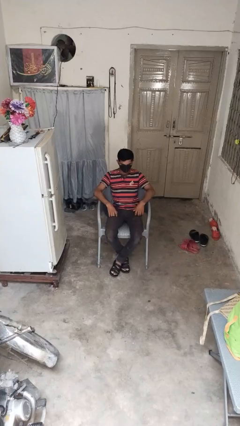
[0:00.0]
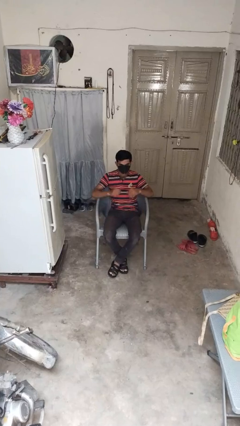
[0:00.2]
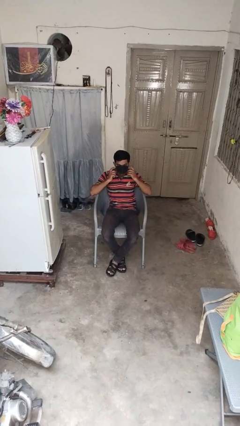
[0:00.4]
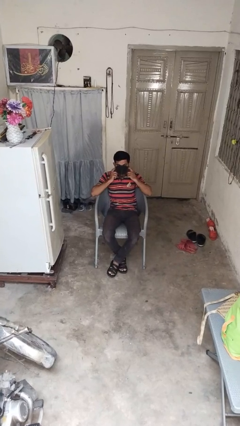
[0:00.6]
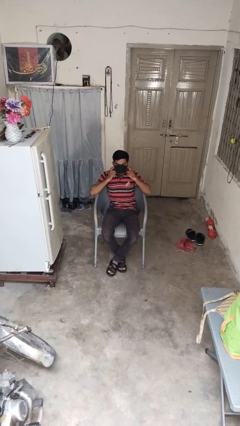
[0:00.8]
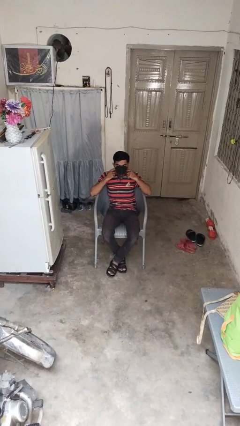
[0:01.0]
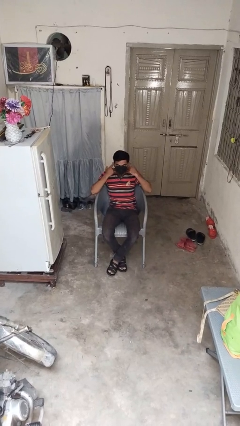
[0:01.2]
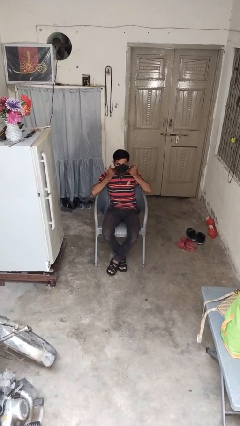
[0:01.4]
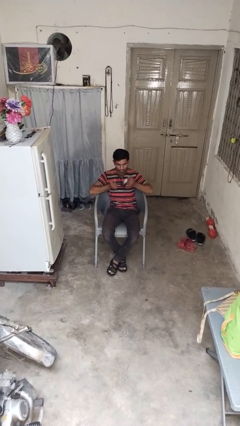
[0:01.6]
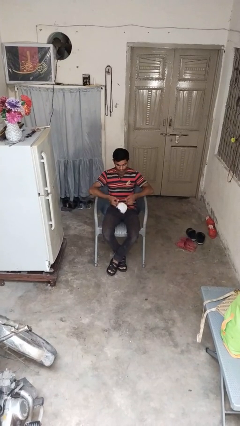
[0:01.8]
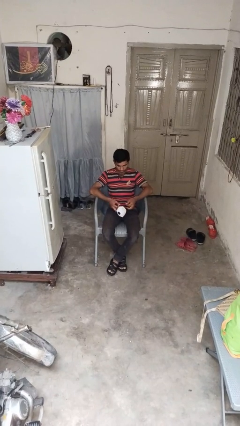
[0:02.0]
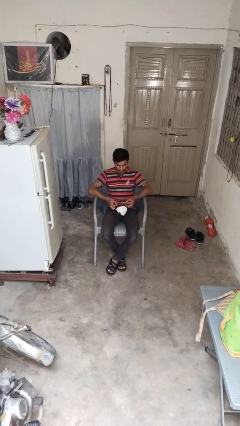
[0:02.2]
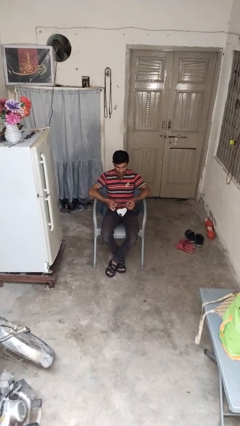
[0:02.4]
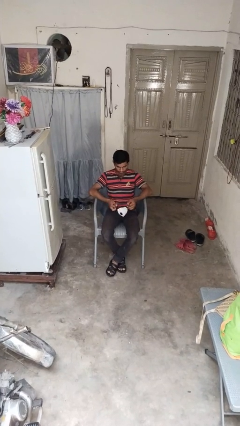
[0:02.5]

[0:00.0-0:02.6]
person takes off facemask

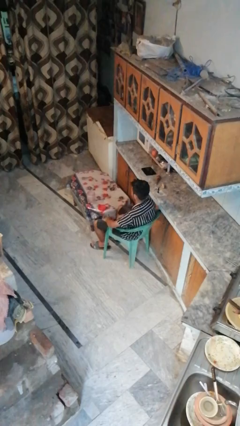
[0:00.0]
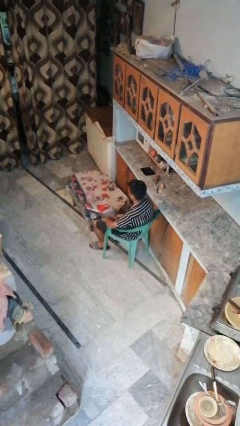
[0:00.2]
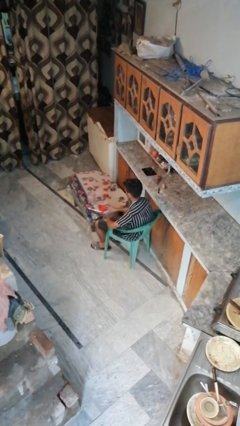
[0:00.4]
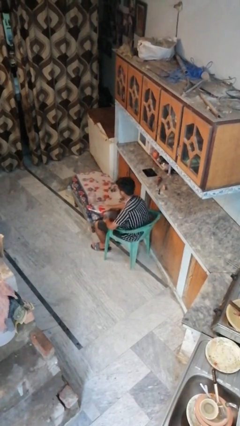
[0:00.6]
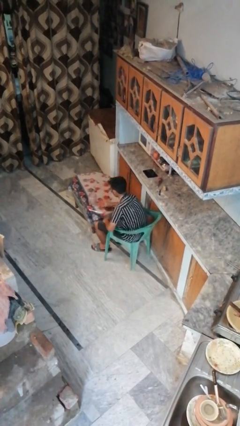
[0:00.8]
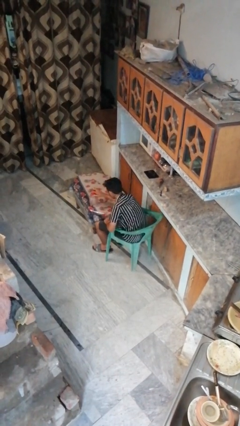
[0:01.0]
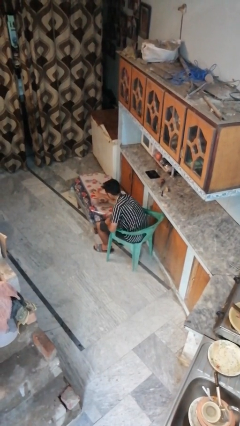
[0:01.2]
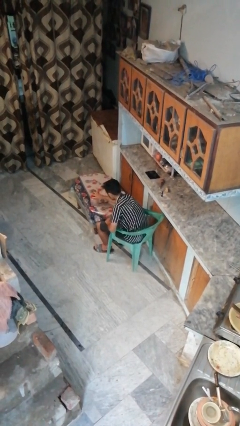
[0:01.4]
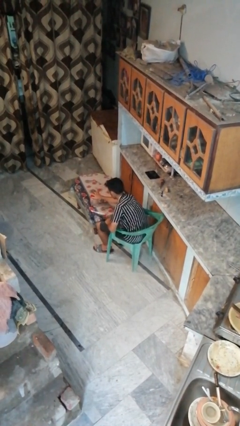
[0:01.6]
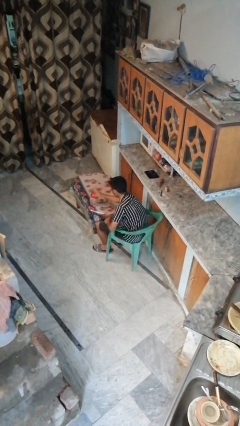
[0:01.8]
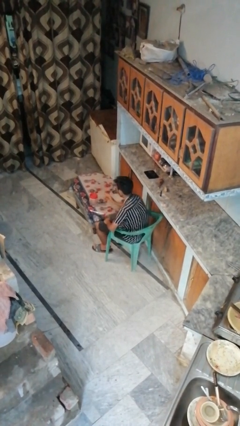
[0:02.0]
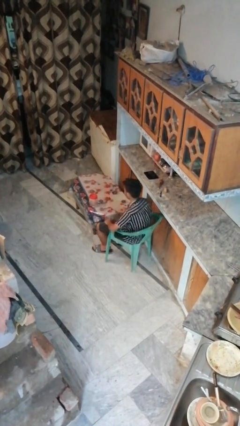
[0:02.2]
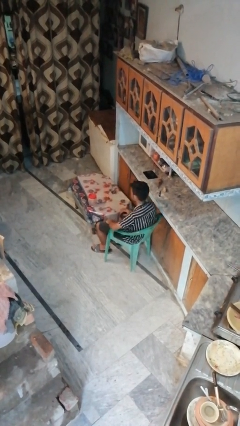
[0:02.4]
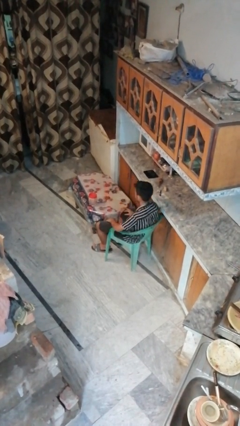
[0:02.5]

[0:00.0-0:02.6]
person closes jar

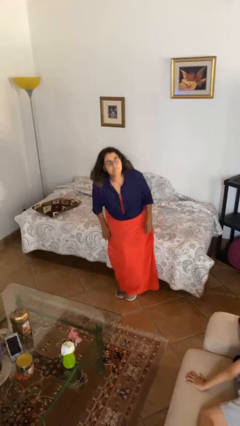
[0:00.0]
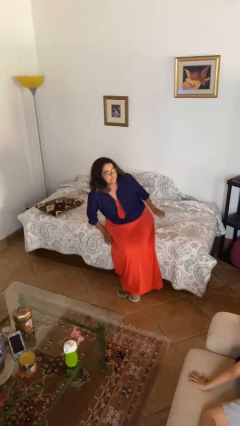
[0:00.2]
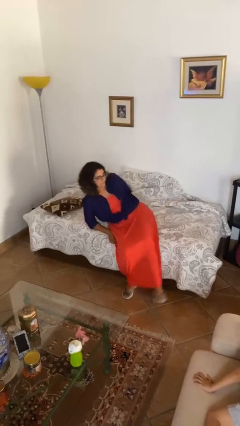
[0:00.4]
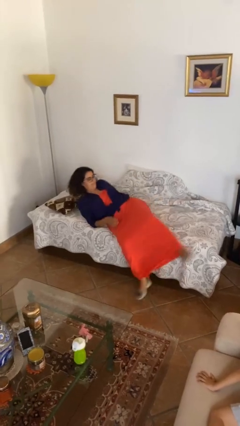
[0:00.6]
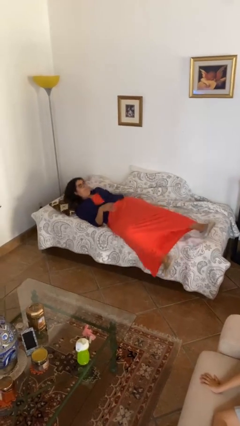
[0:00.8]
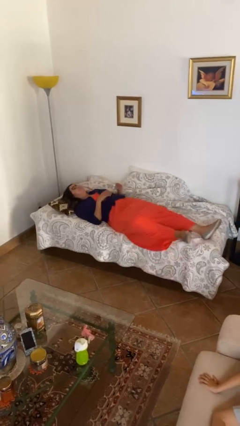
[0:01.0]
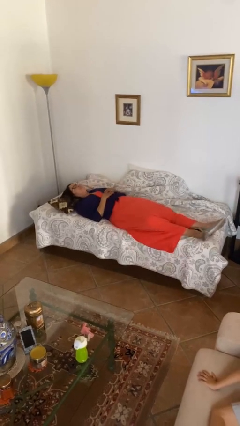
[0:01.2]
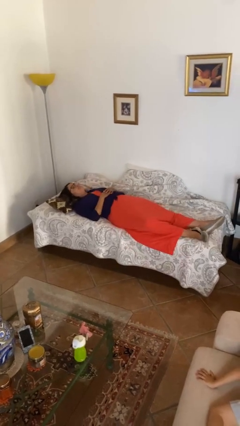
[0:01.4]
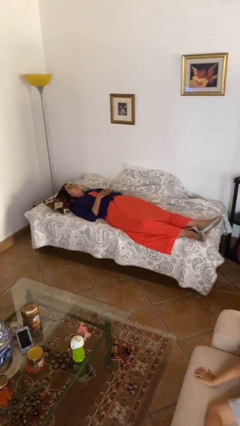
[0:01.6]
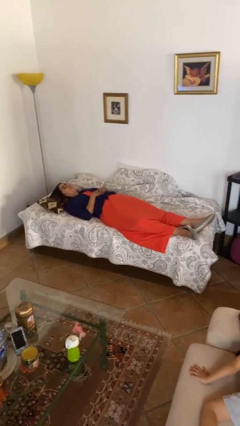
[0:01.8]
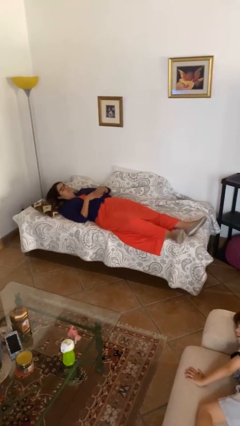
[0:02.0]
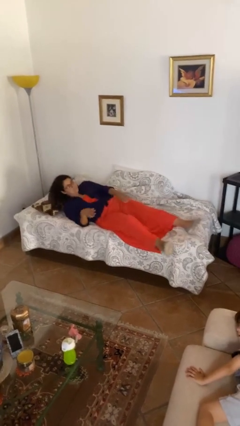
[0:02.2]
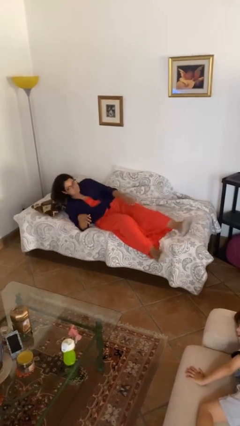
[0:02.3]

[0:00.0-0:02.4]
person lies down on bed

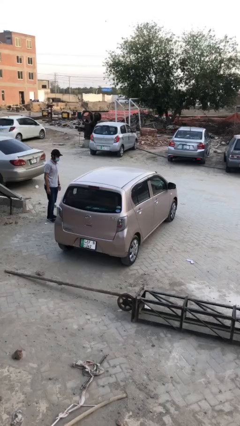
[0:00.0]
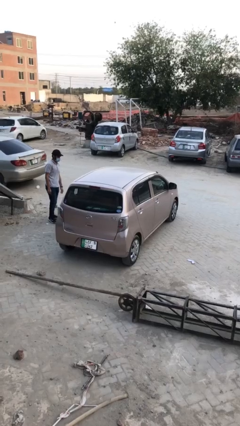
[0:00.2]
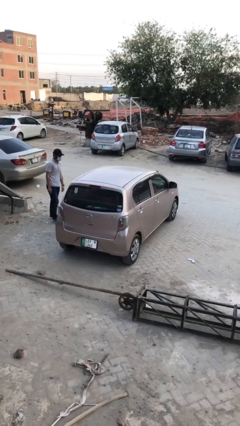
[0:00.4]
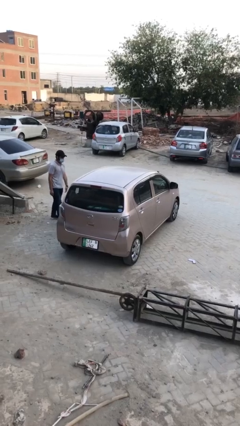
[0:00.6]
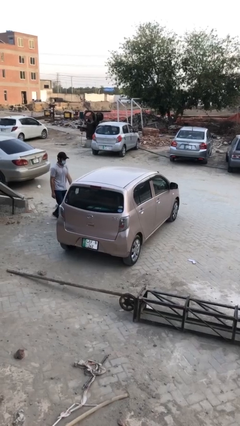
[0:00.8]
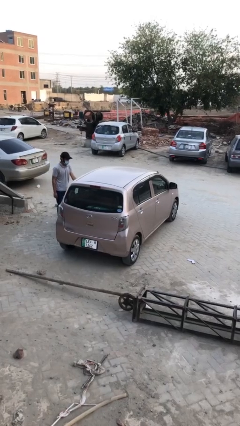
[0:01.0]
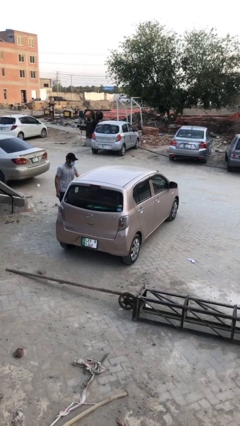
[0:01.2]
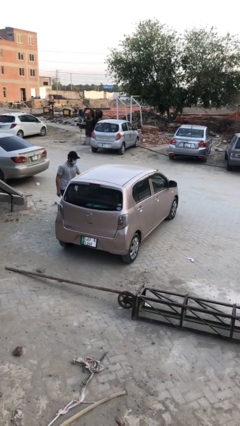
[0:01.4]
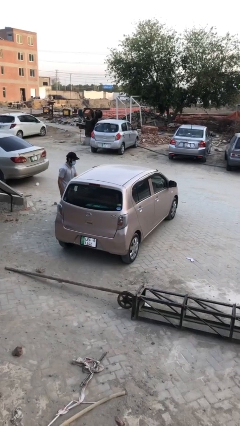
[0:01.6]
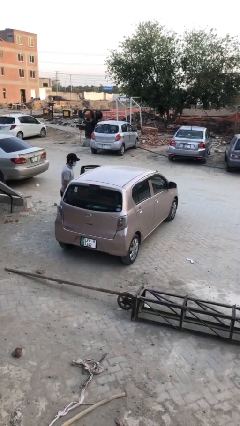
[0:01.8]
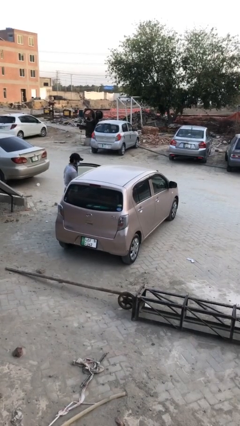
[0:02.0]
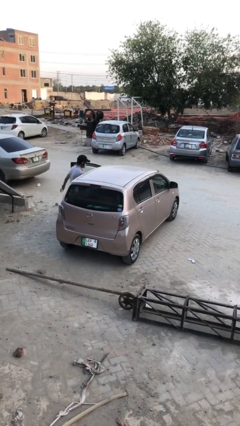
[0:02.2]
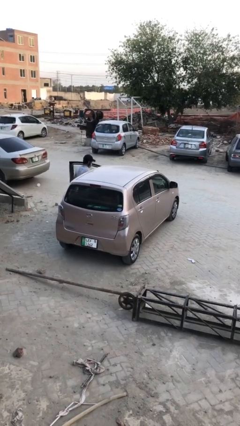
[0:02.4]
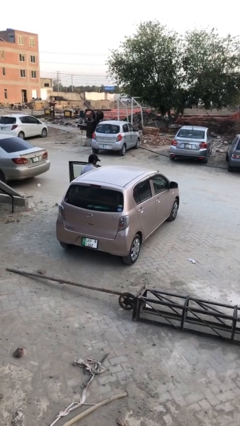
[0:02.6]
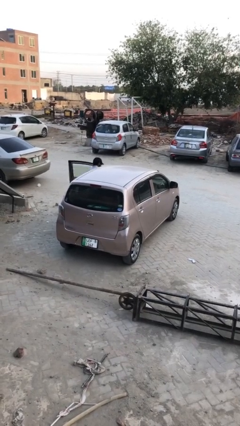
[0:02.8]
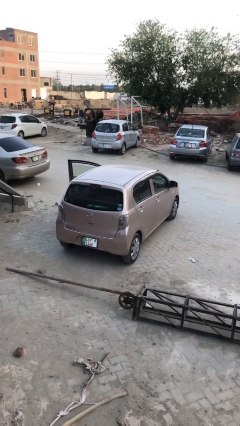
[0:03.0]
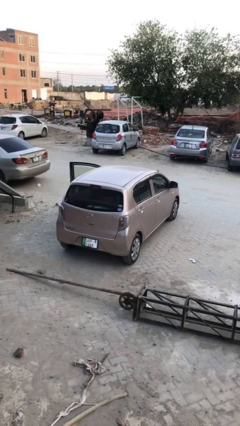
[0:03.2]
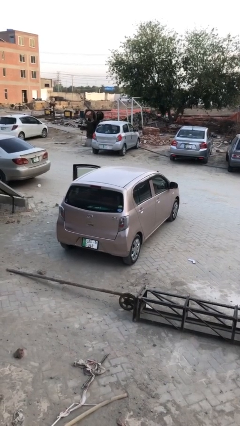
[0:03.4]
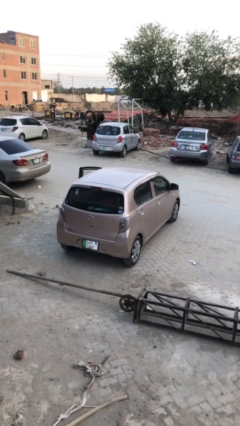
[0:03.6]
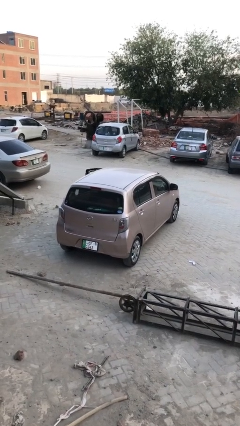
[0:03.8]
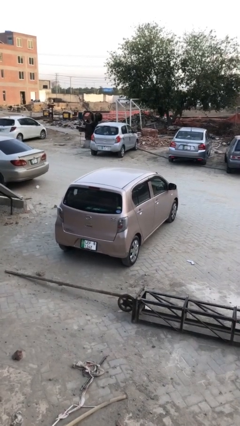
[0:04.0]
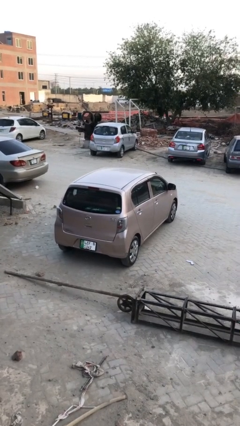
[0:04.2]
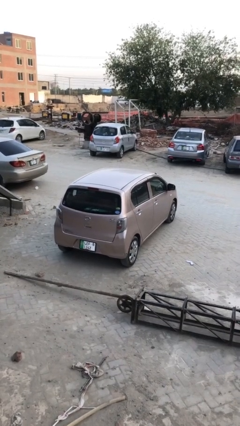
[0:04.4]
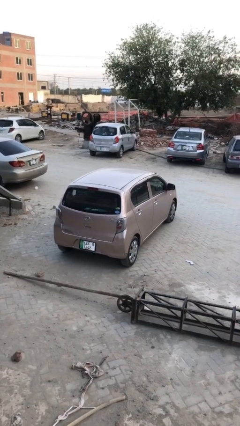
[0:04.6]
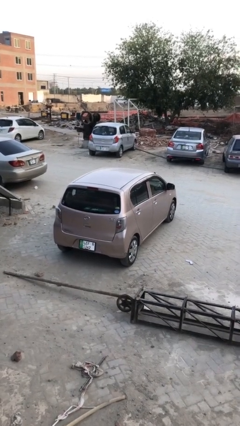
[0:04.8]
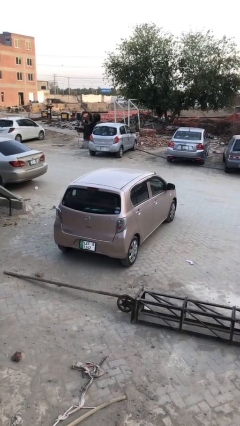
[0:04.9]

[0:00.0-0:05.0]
car picks up person

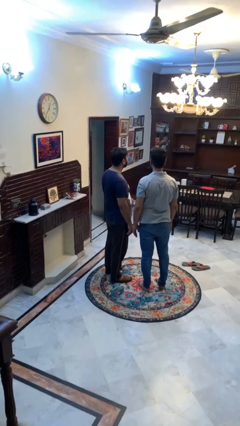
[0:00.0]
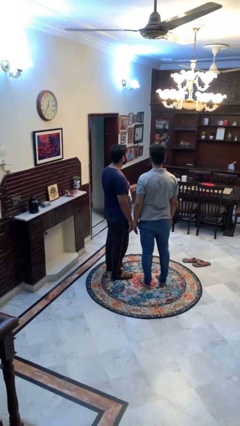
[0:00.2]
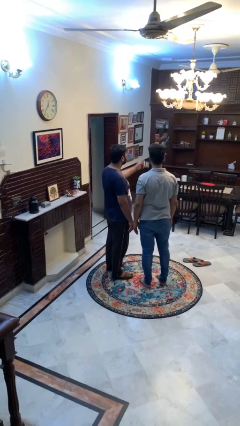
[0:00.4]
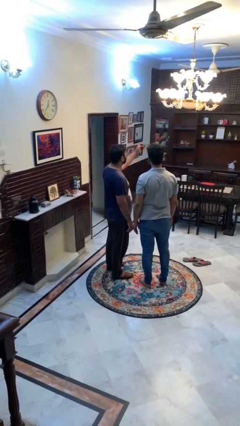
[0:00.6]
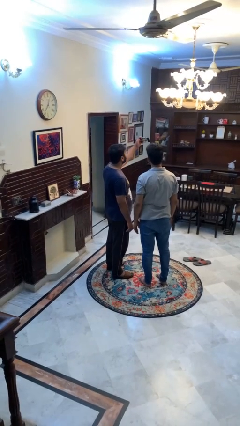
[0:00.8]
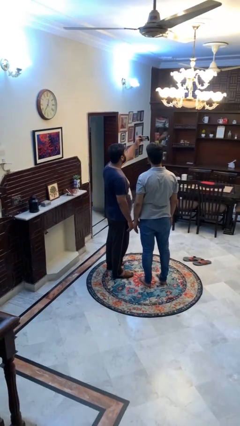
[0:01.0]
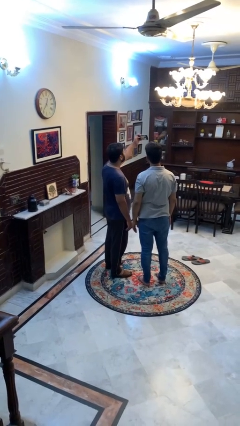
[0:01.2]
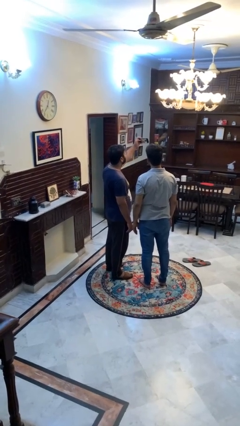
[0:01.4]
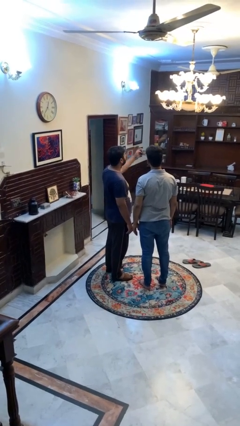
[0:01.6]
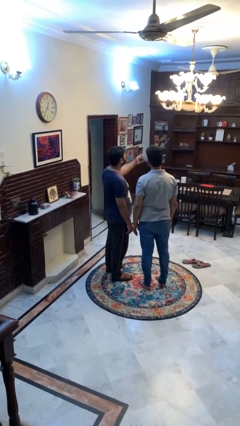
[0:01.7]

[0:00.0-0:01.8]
person takes selfie with person

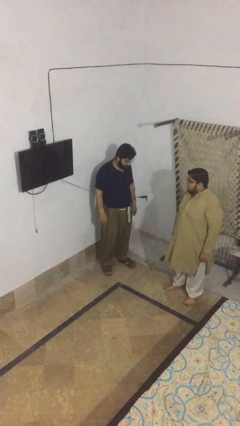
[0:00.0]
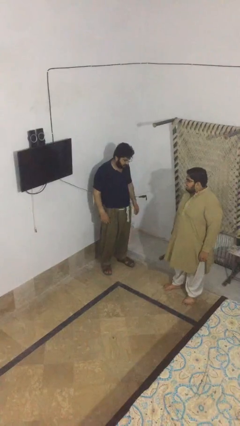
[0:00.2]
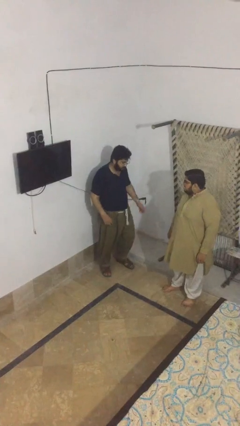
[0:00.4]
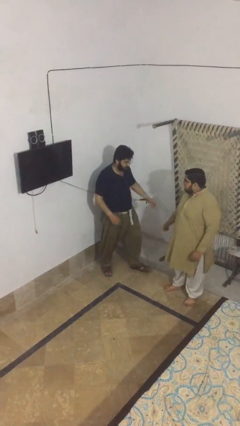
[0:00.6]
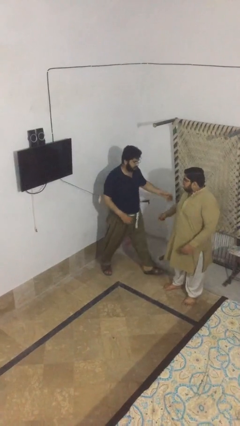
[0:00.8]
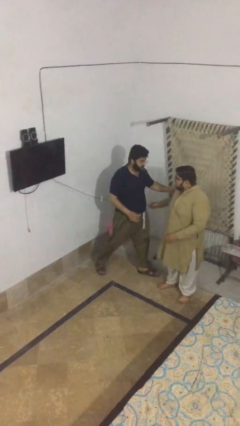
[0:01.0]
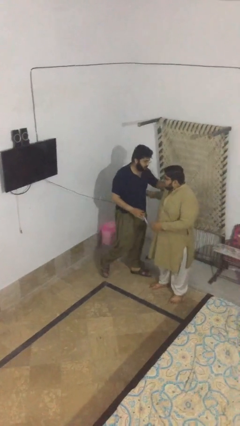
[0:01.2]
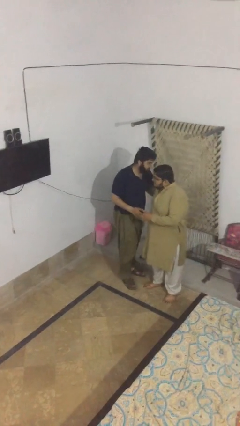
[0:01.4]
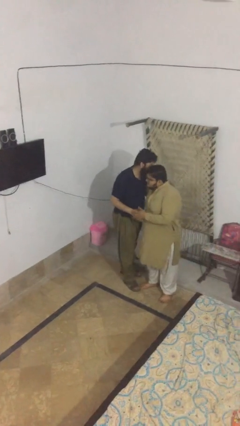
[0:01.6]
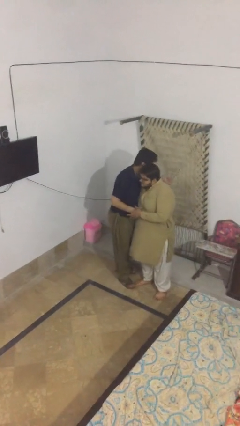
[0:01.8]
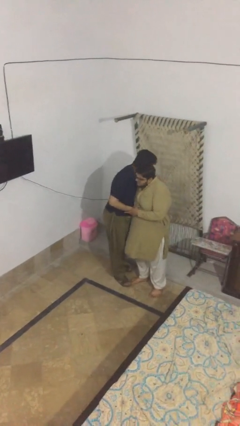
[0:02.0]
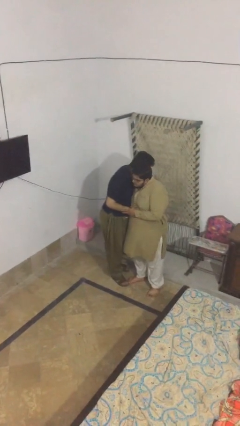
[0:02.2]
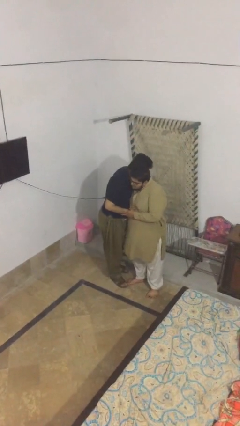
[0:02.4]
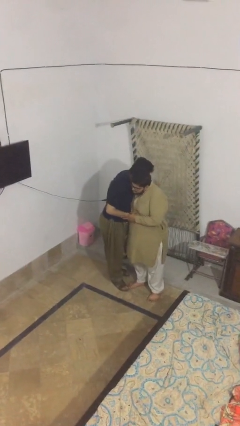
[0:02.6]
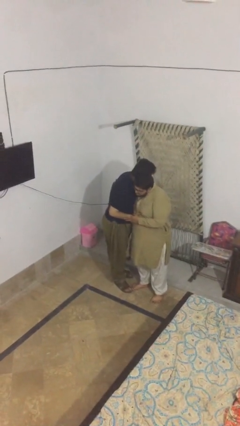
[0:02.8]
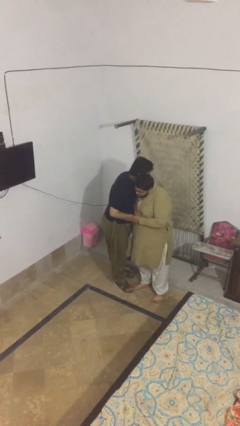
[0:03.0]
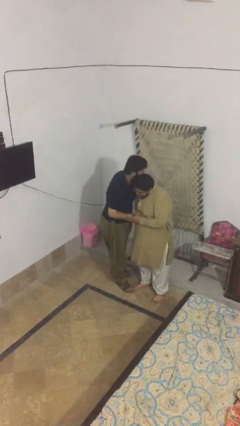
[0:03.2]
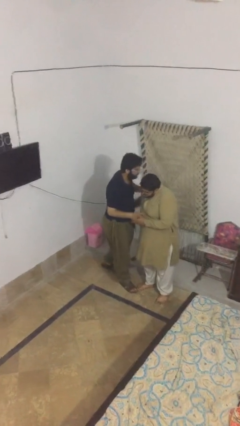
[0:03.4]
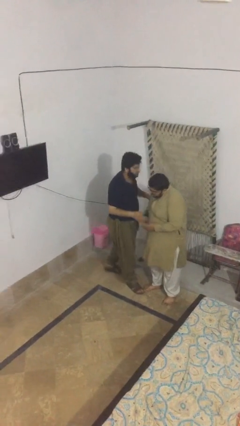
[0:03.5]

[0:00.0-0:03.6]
person embraces person
